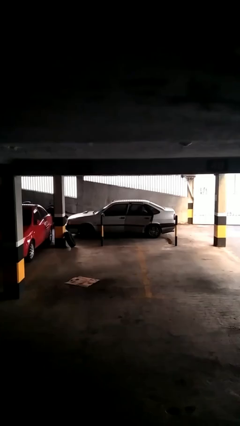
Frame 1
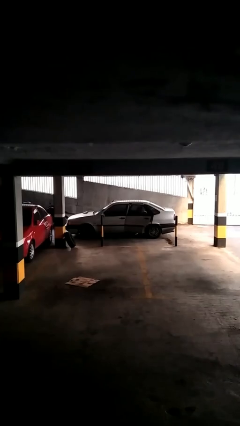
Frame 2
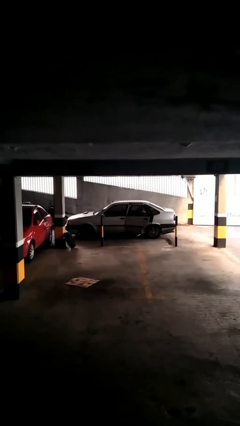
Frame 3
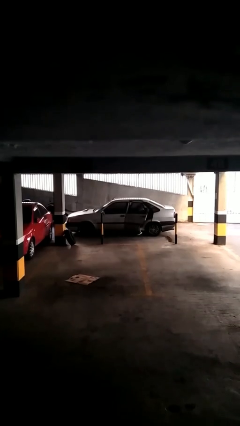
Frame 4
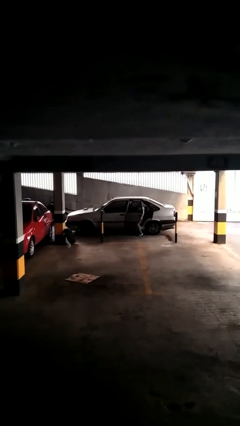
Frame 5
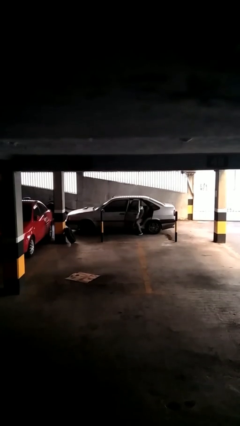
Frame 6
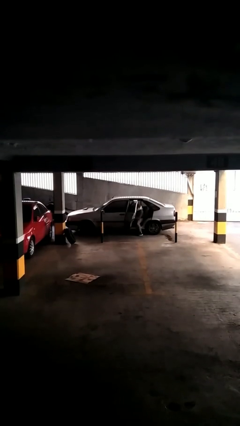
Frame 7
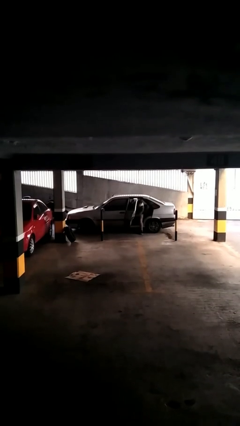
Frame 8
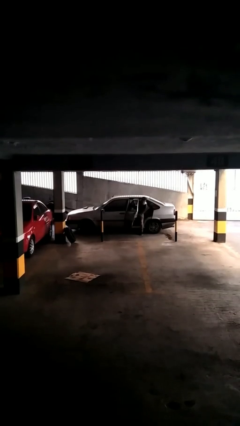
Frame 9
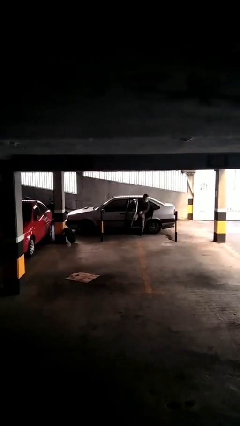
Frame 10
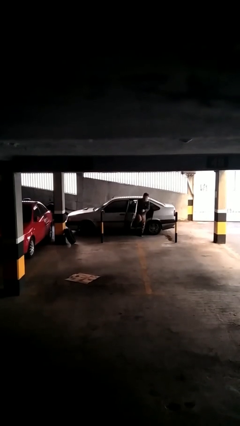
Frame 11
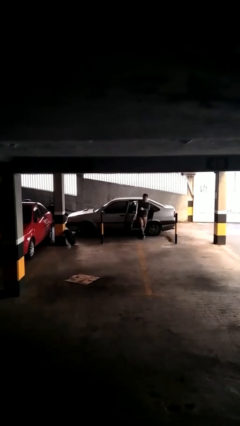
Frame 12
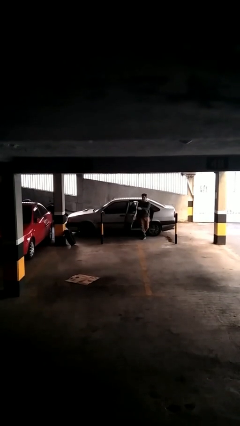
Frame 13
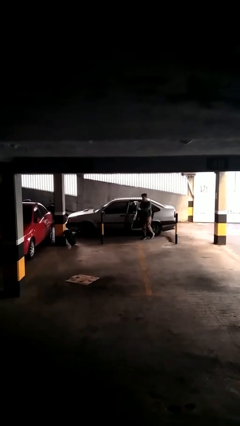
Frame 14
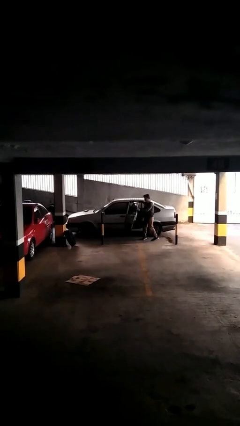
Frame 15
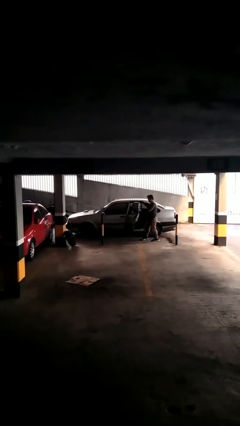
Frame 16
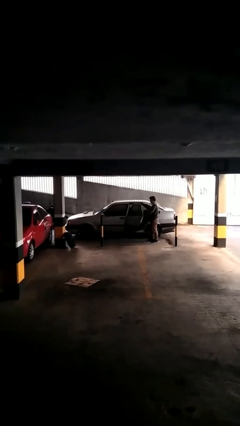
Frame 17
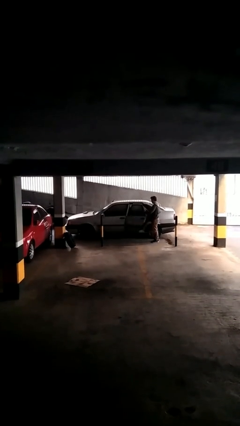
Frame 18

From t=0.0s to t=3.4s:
car drops off person

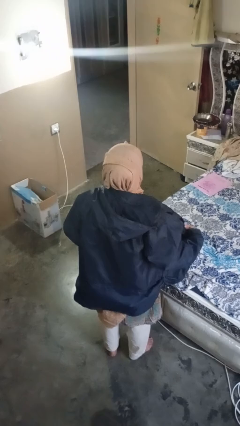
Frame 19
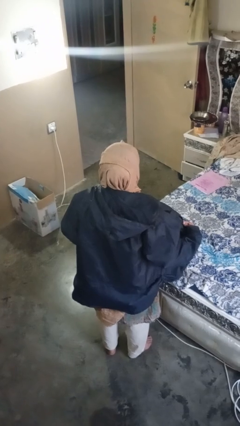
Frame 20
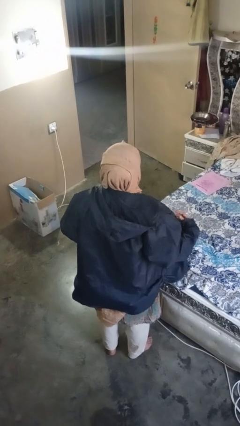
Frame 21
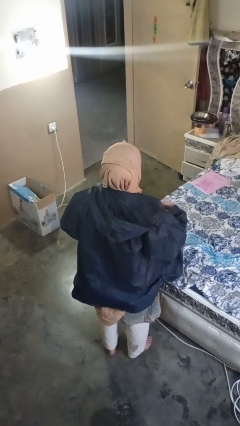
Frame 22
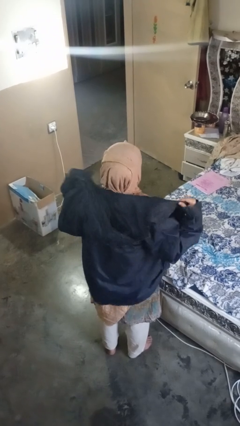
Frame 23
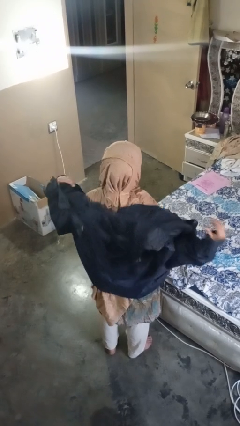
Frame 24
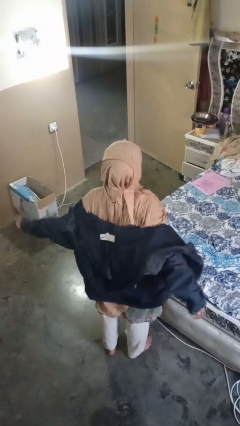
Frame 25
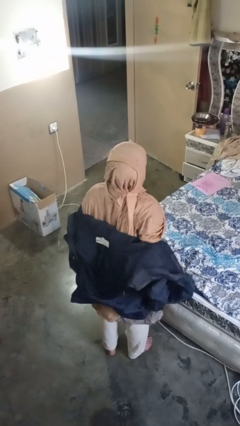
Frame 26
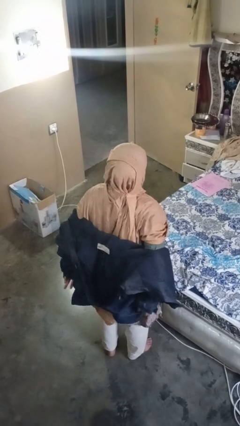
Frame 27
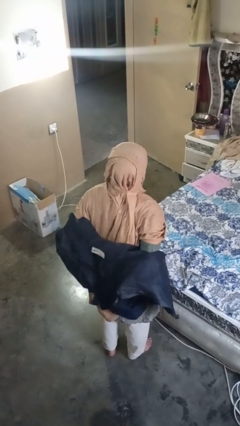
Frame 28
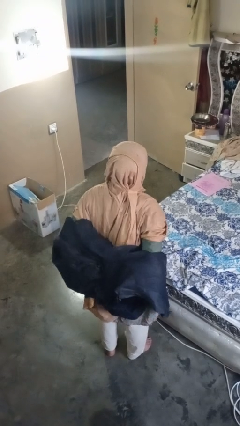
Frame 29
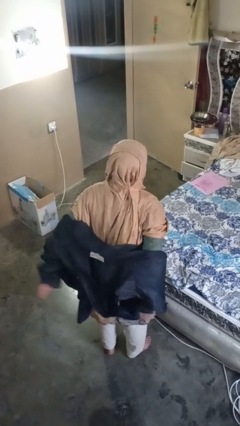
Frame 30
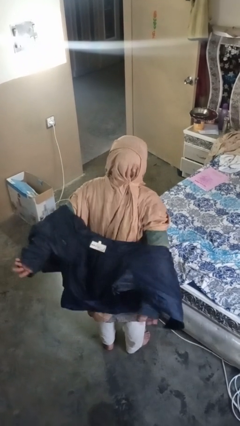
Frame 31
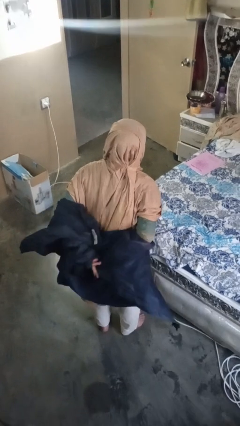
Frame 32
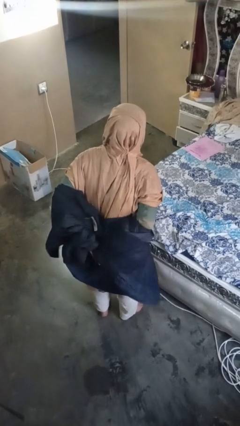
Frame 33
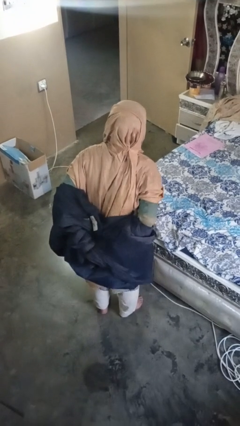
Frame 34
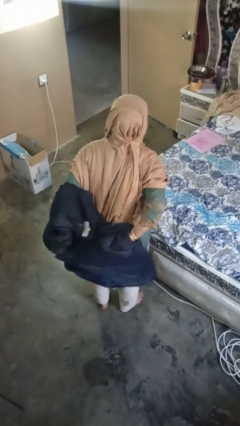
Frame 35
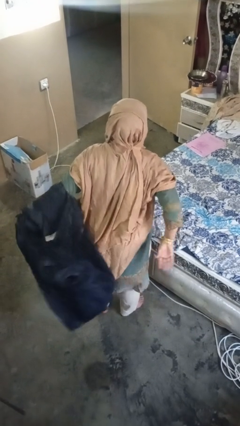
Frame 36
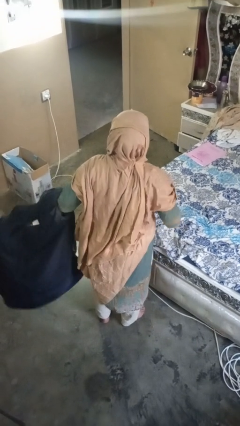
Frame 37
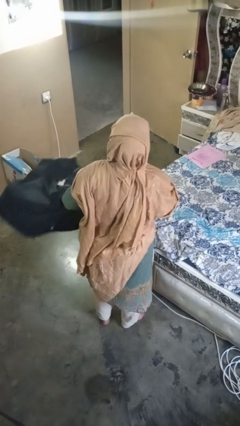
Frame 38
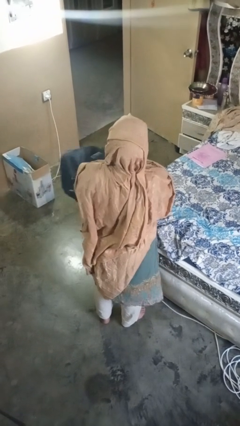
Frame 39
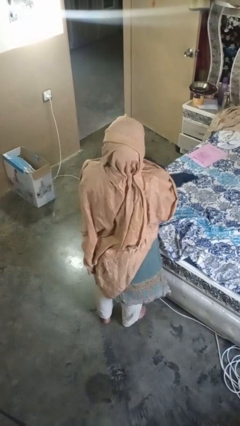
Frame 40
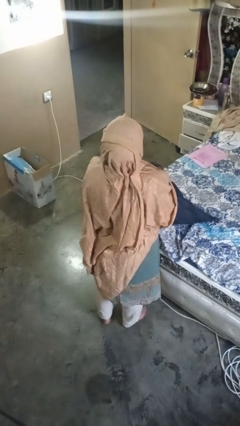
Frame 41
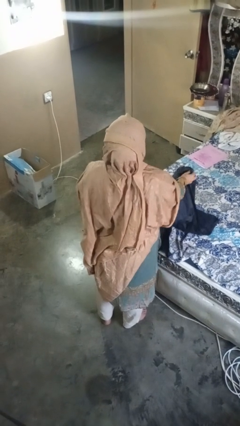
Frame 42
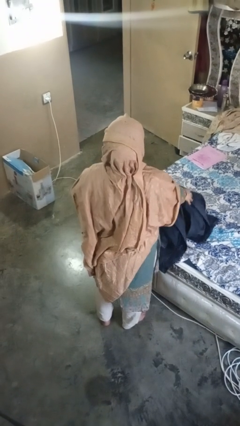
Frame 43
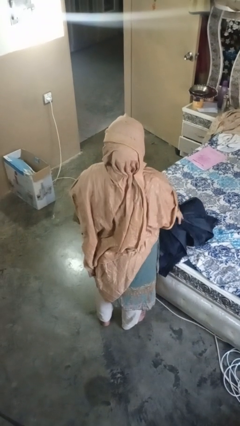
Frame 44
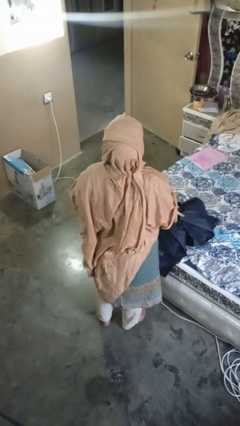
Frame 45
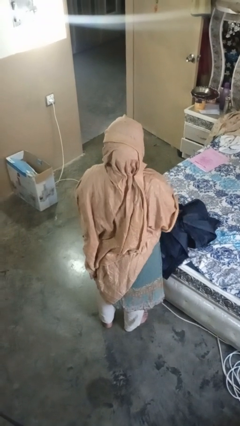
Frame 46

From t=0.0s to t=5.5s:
person takes off jacket

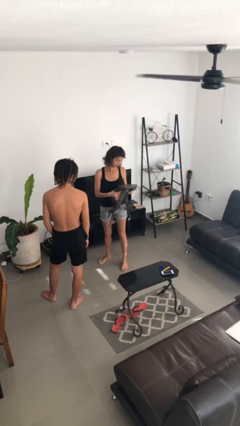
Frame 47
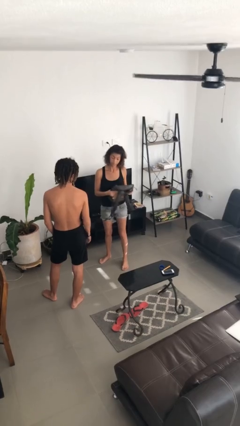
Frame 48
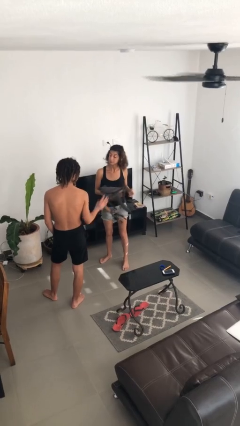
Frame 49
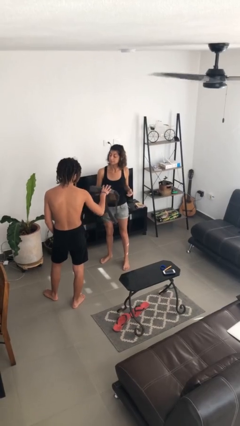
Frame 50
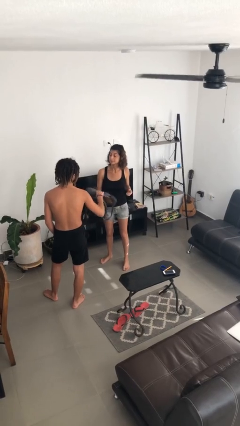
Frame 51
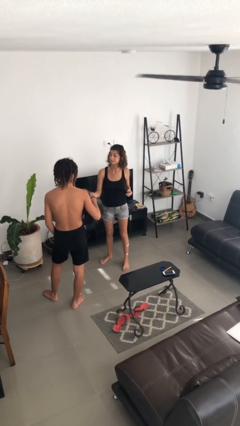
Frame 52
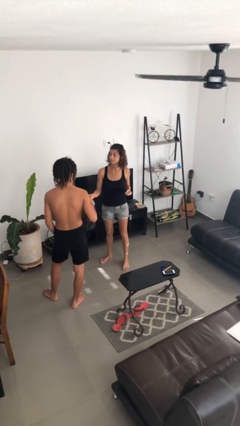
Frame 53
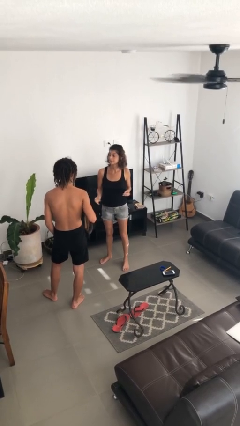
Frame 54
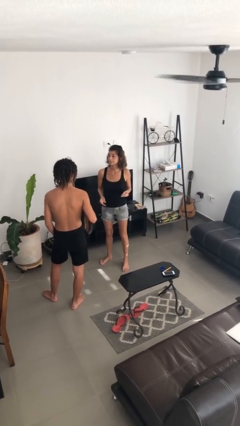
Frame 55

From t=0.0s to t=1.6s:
person transfers object to person

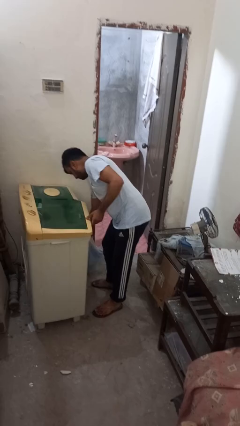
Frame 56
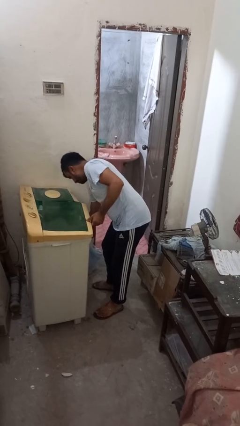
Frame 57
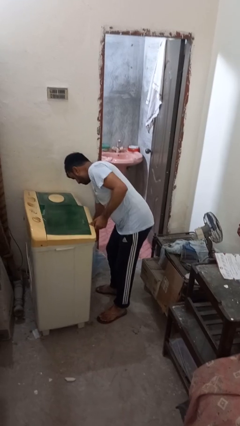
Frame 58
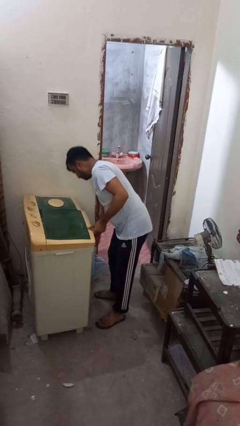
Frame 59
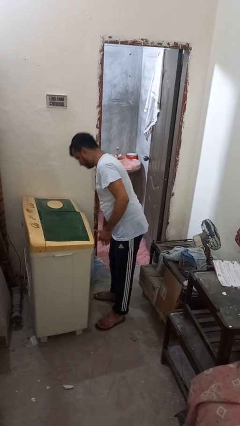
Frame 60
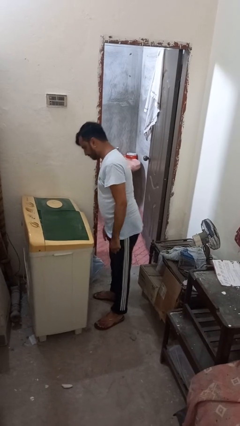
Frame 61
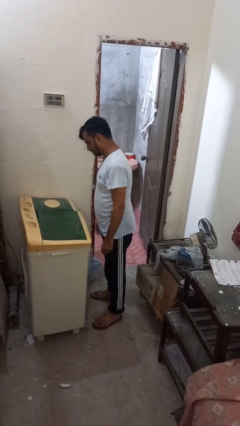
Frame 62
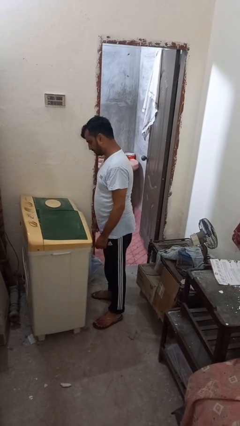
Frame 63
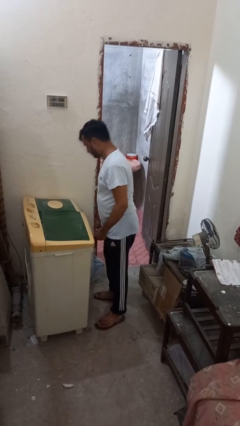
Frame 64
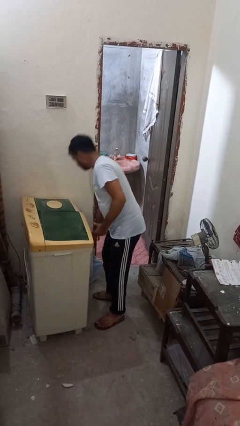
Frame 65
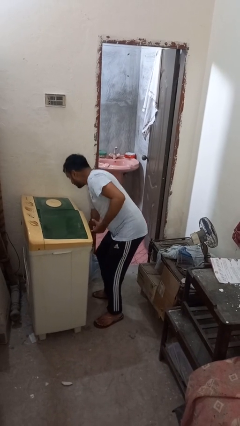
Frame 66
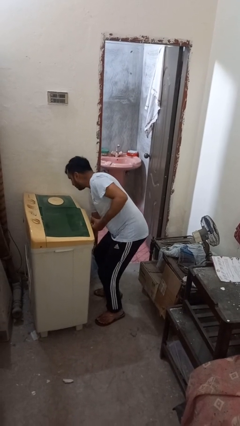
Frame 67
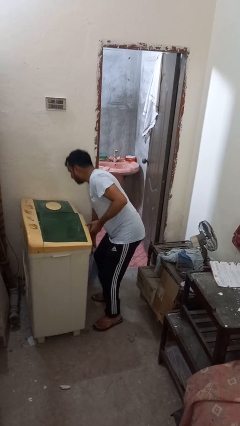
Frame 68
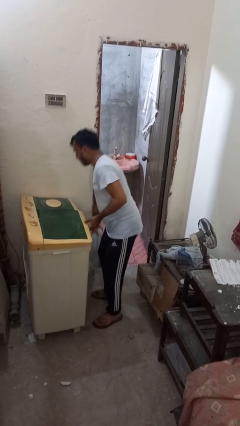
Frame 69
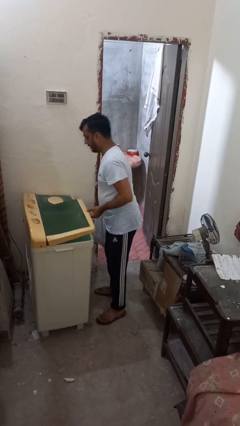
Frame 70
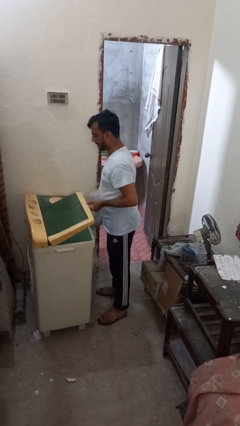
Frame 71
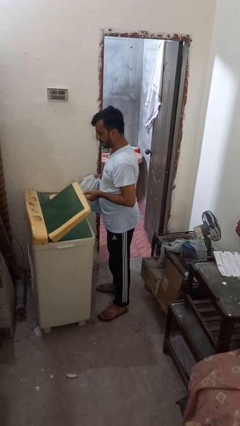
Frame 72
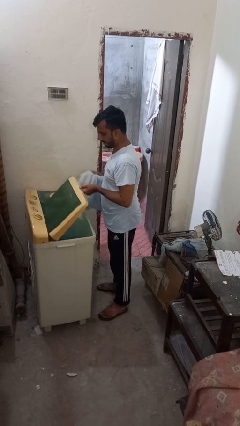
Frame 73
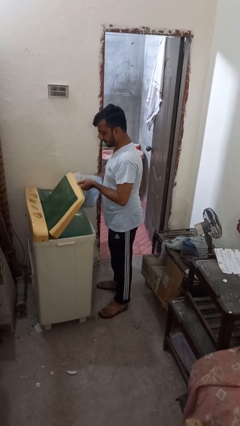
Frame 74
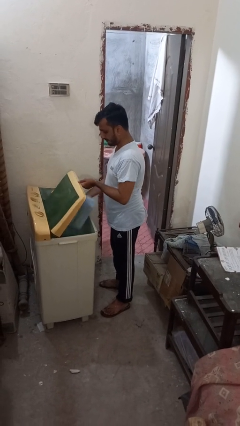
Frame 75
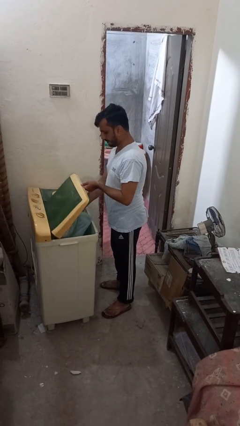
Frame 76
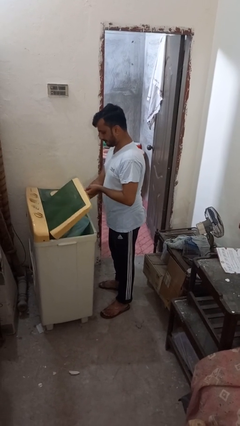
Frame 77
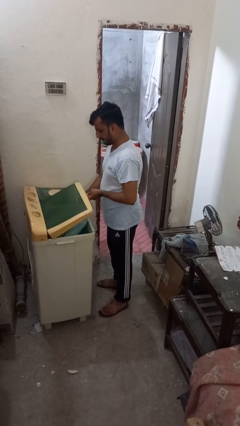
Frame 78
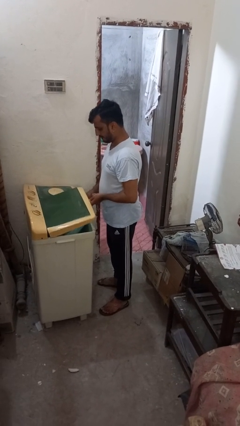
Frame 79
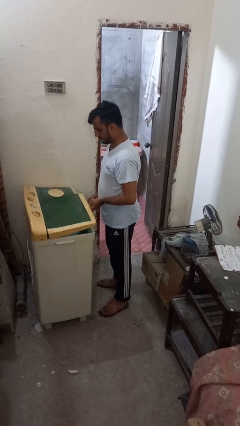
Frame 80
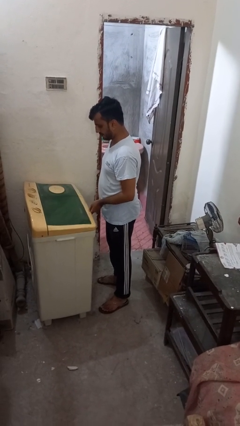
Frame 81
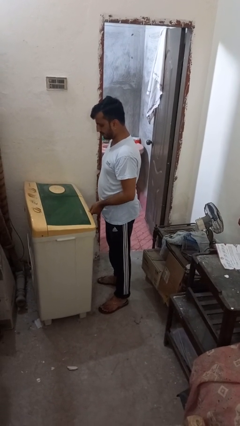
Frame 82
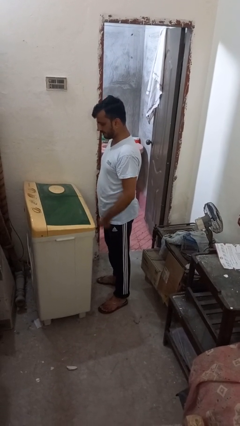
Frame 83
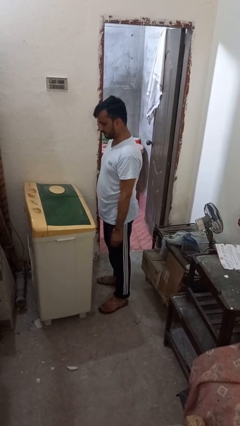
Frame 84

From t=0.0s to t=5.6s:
person loads clotheswasher

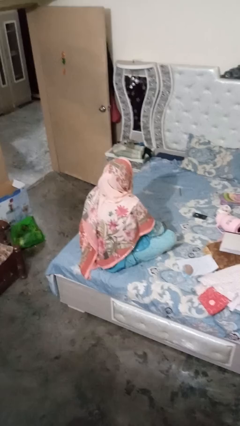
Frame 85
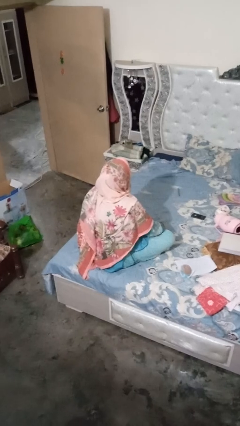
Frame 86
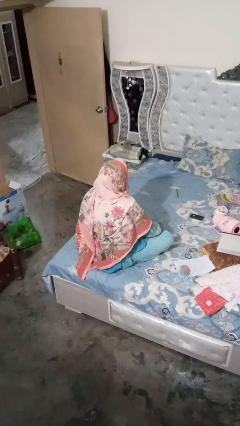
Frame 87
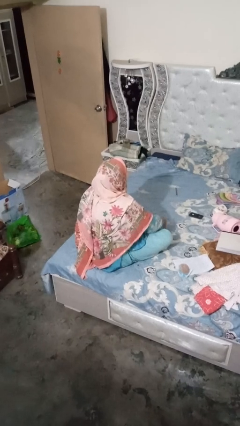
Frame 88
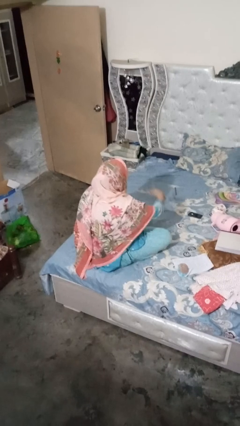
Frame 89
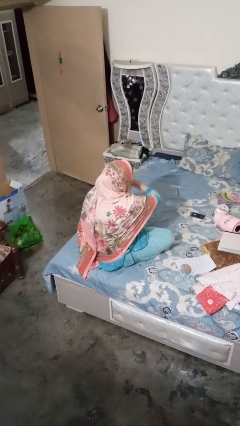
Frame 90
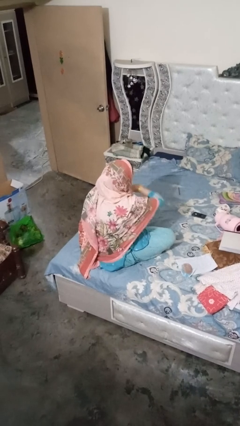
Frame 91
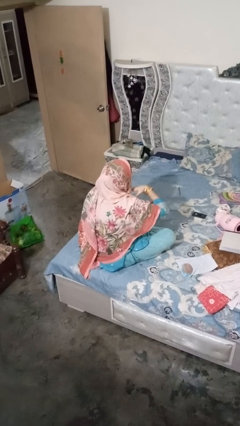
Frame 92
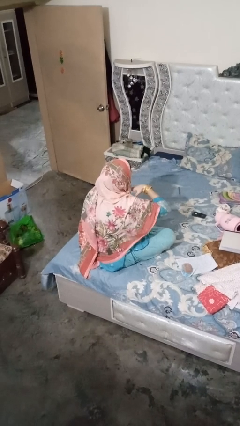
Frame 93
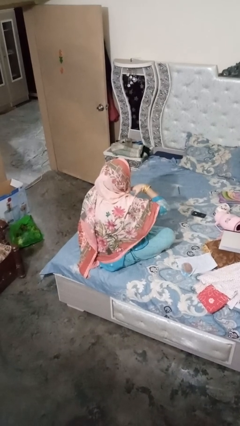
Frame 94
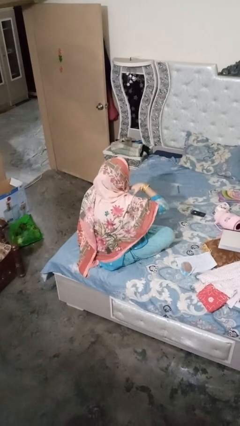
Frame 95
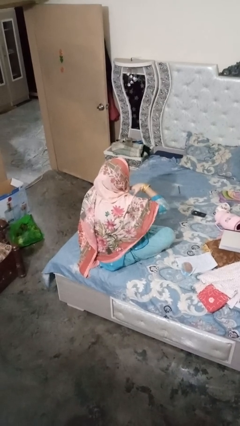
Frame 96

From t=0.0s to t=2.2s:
person gestures cut
